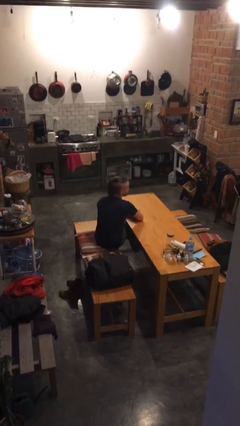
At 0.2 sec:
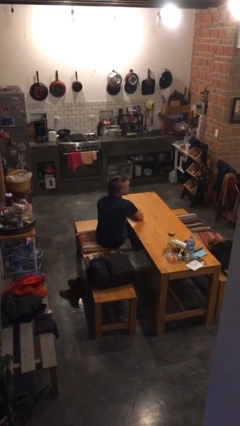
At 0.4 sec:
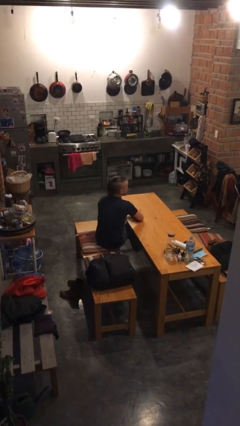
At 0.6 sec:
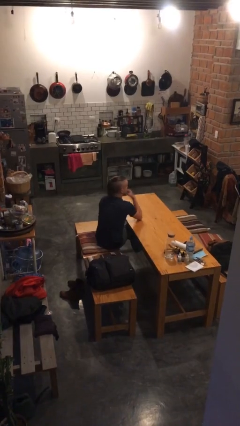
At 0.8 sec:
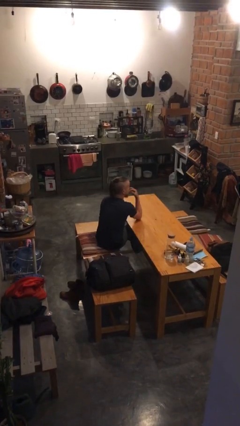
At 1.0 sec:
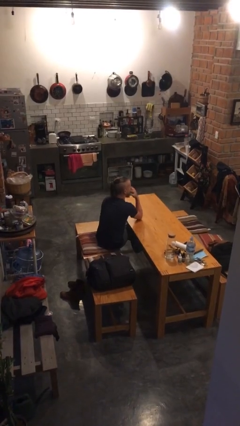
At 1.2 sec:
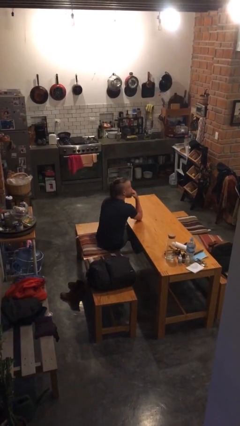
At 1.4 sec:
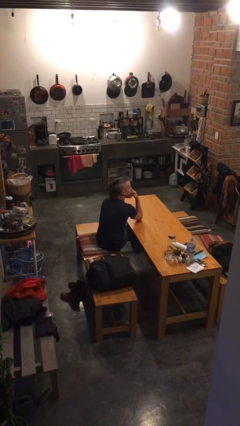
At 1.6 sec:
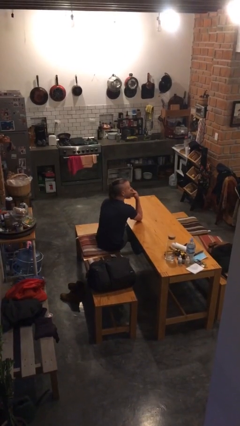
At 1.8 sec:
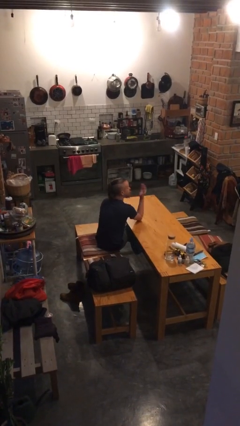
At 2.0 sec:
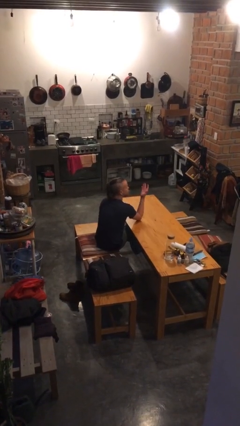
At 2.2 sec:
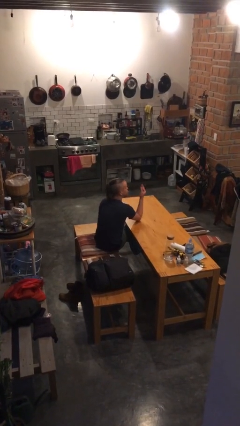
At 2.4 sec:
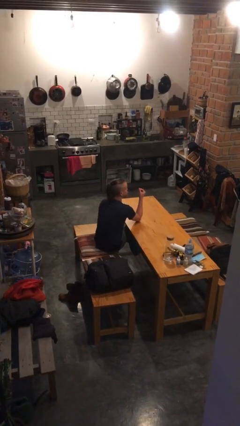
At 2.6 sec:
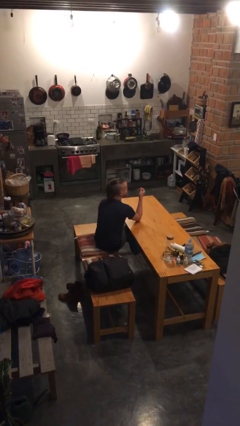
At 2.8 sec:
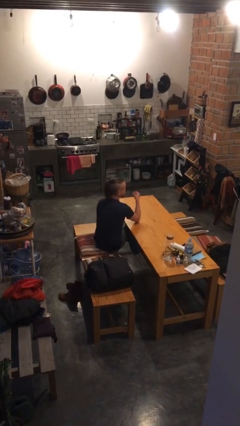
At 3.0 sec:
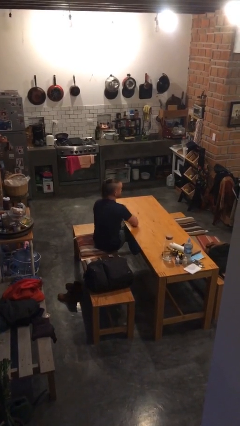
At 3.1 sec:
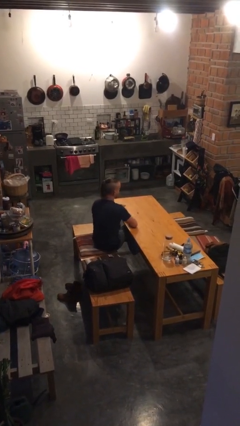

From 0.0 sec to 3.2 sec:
person licks fingers

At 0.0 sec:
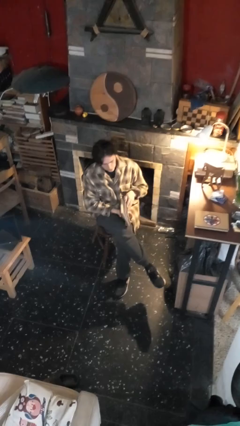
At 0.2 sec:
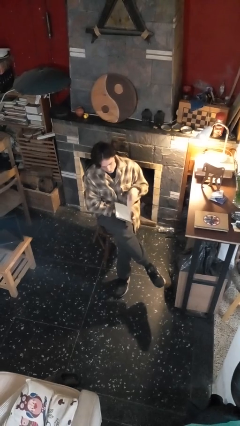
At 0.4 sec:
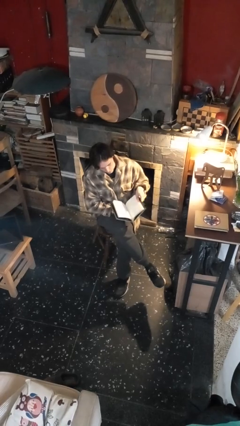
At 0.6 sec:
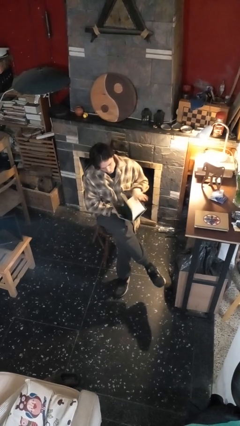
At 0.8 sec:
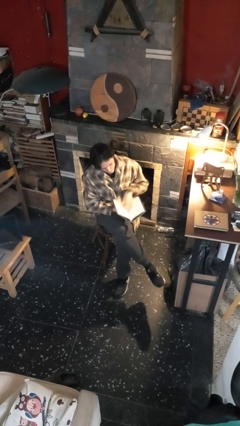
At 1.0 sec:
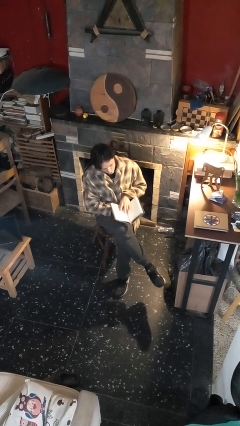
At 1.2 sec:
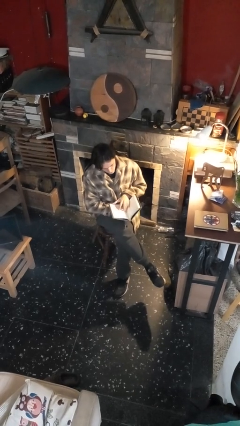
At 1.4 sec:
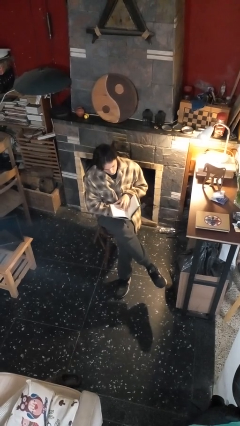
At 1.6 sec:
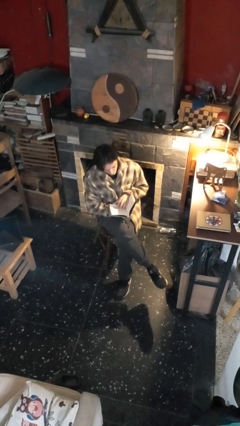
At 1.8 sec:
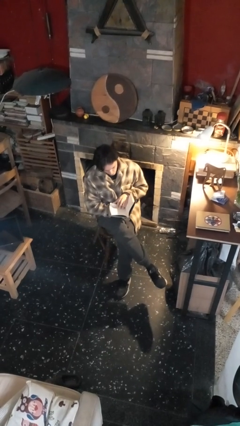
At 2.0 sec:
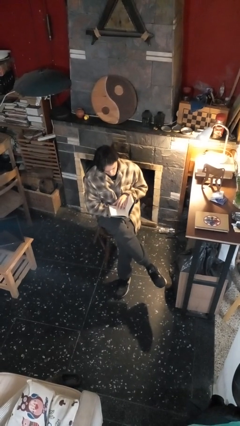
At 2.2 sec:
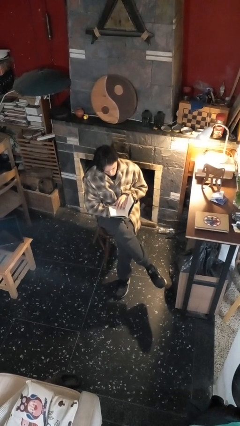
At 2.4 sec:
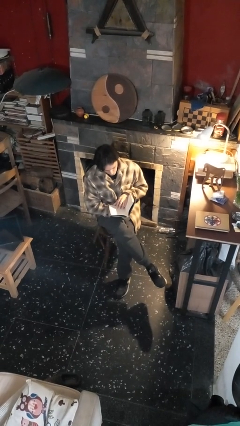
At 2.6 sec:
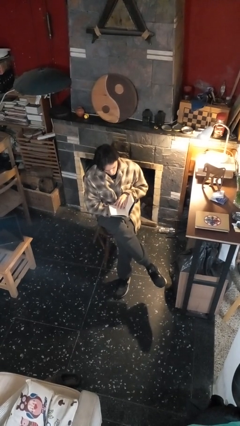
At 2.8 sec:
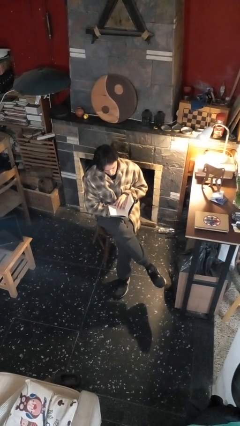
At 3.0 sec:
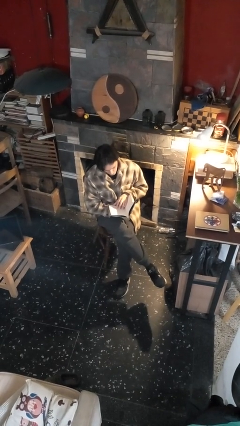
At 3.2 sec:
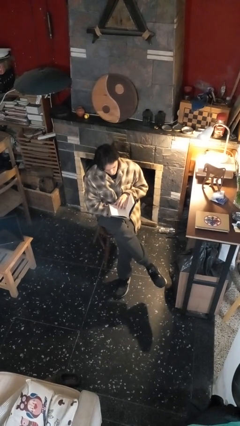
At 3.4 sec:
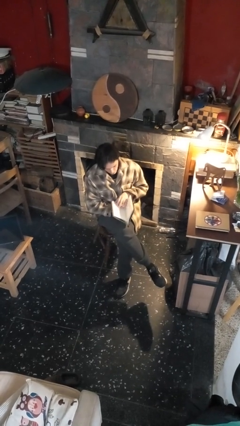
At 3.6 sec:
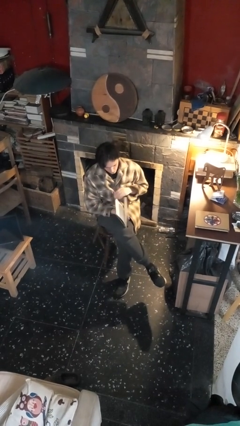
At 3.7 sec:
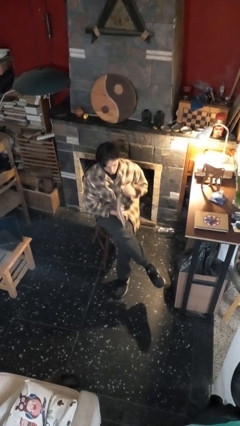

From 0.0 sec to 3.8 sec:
person reads book

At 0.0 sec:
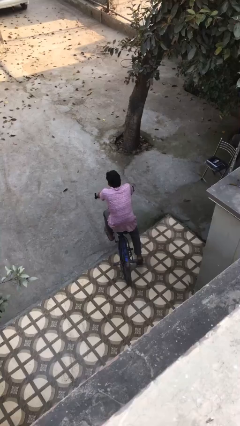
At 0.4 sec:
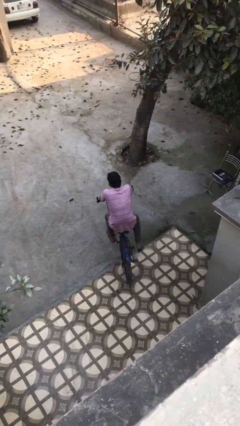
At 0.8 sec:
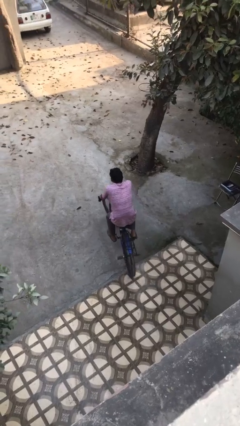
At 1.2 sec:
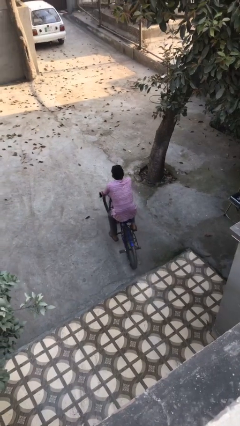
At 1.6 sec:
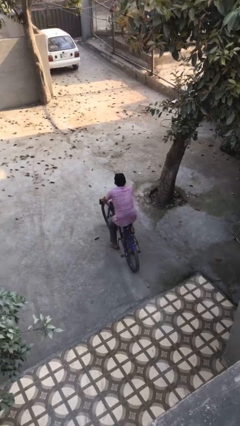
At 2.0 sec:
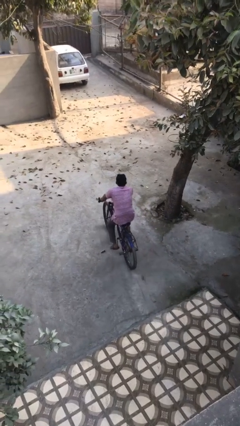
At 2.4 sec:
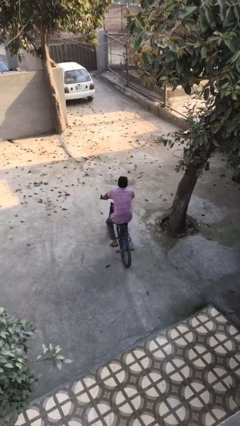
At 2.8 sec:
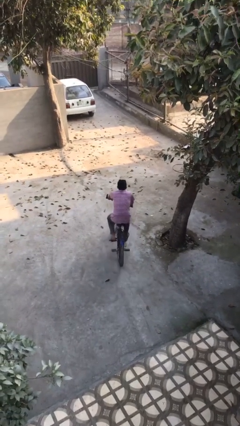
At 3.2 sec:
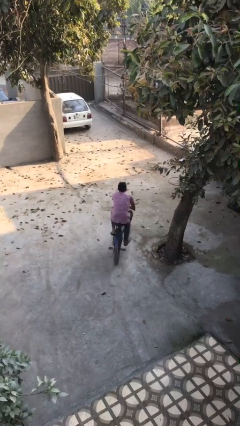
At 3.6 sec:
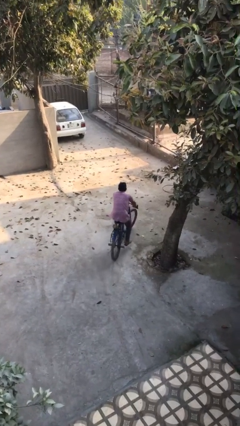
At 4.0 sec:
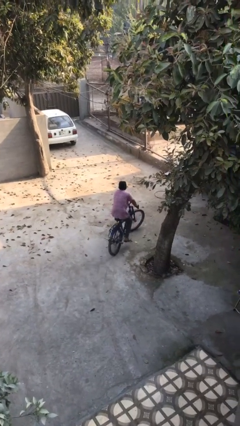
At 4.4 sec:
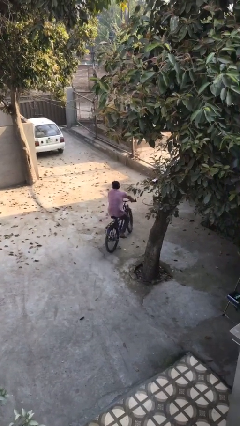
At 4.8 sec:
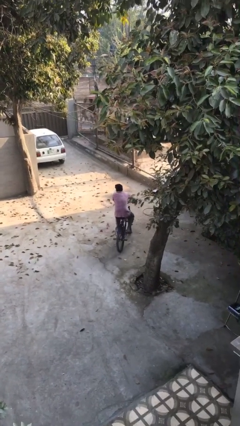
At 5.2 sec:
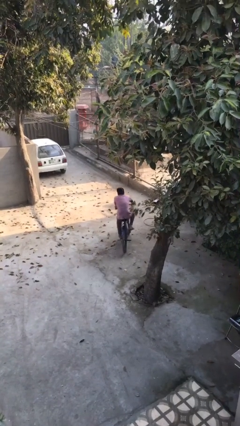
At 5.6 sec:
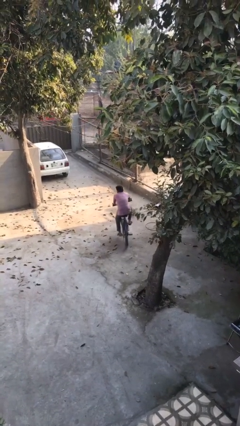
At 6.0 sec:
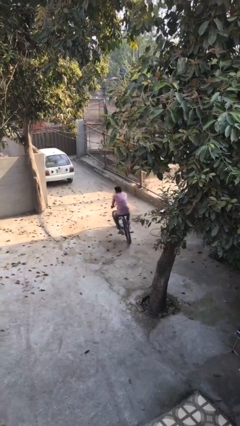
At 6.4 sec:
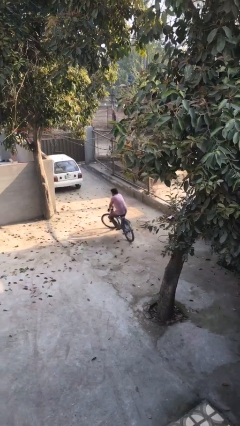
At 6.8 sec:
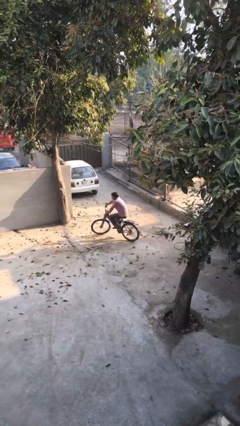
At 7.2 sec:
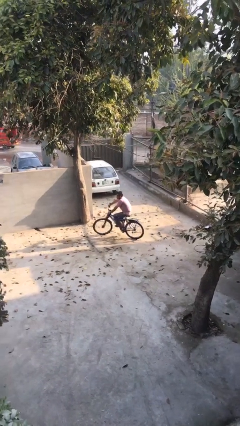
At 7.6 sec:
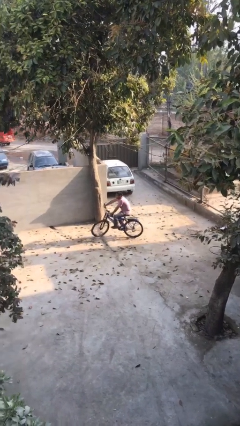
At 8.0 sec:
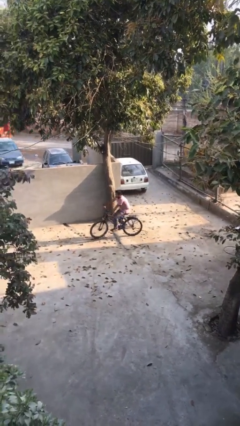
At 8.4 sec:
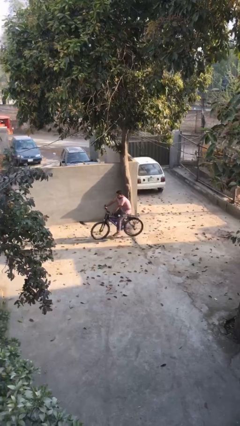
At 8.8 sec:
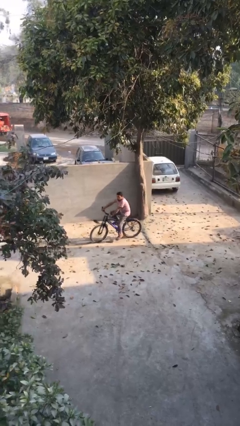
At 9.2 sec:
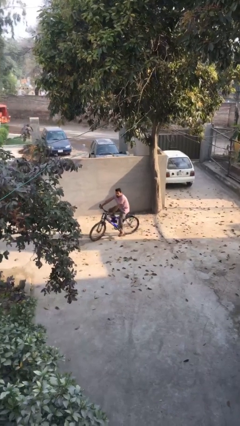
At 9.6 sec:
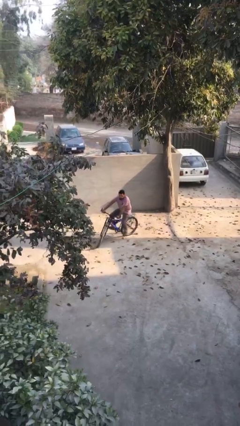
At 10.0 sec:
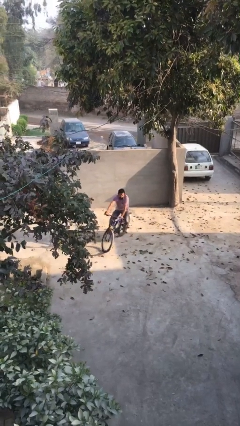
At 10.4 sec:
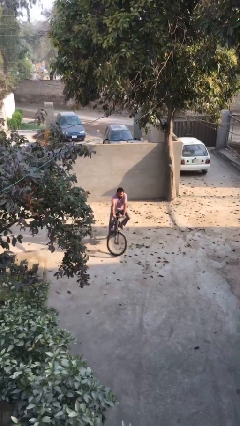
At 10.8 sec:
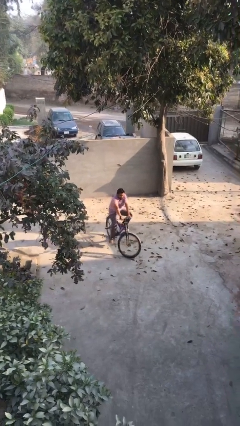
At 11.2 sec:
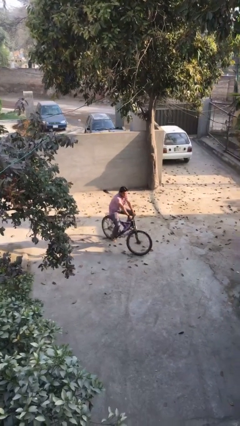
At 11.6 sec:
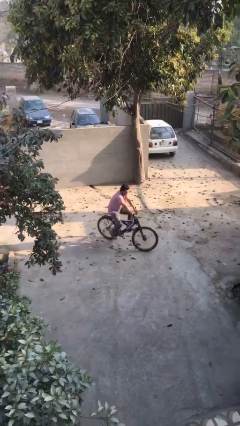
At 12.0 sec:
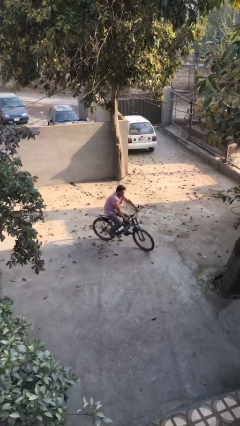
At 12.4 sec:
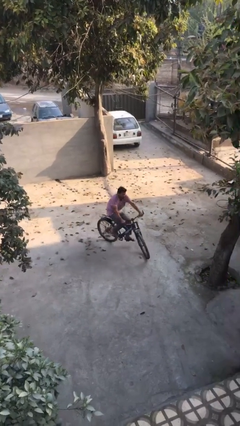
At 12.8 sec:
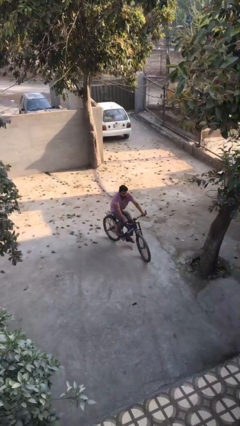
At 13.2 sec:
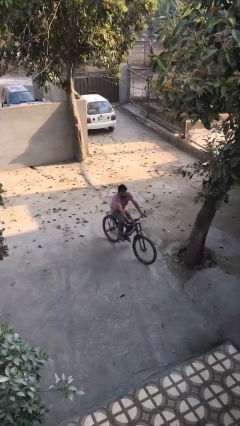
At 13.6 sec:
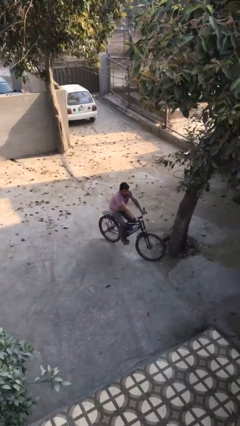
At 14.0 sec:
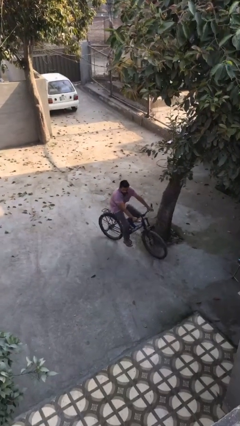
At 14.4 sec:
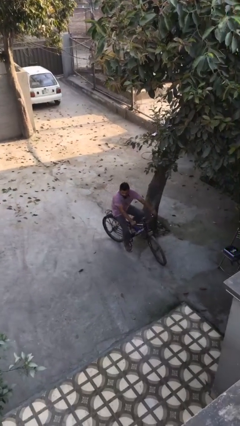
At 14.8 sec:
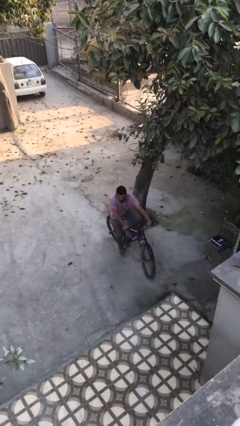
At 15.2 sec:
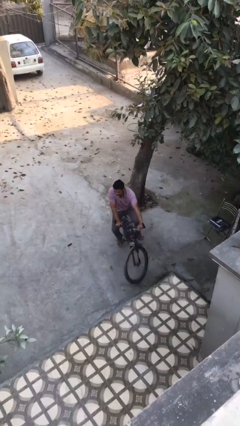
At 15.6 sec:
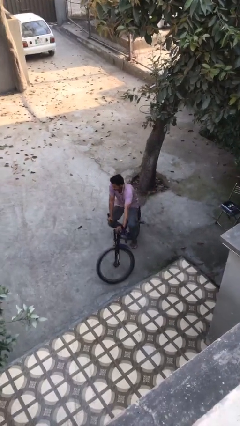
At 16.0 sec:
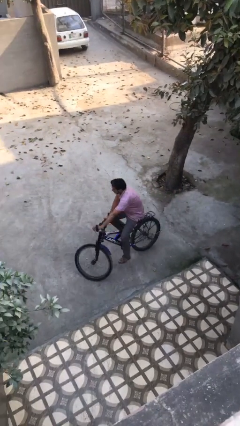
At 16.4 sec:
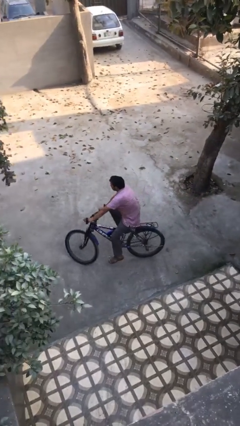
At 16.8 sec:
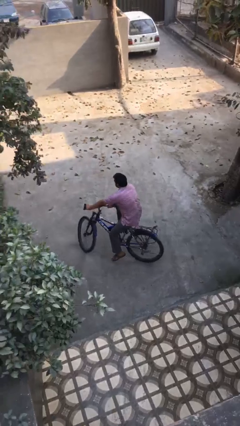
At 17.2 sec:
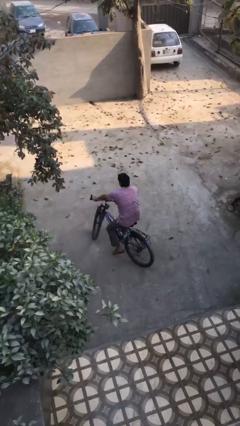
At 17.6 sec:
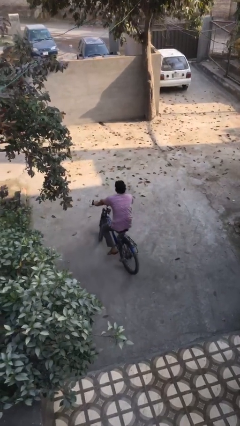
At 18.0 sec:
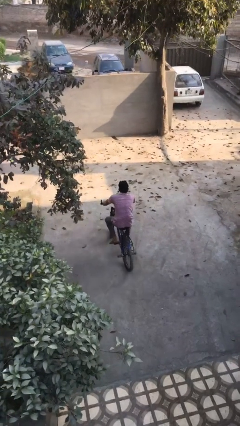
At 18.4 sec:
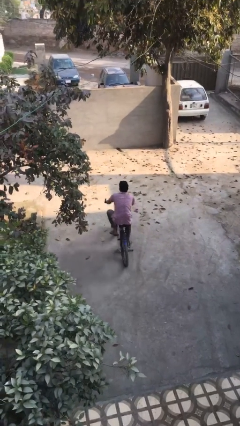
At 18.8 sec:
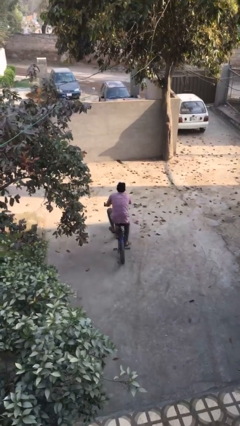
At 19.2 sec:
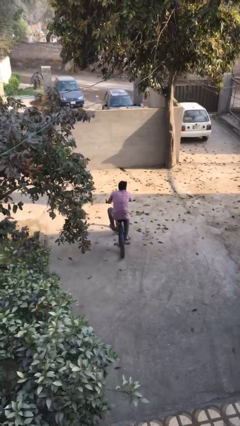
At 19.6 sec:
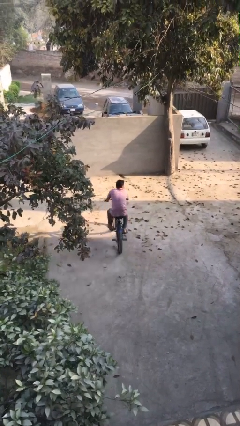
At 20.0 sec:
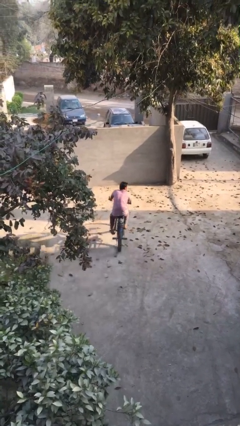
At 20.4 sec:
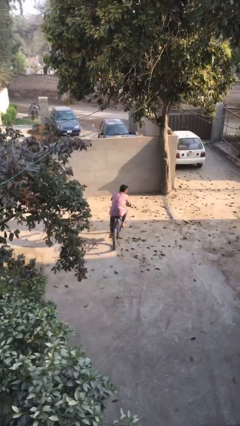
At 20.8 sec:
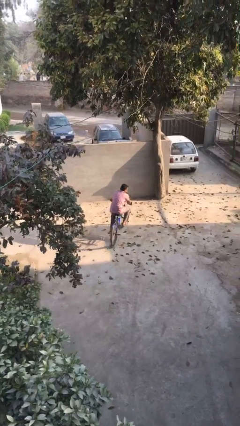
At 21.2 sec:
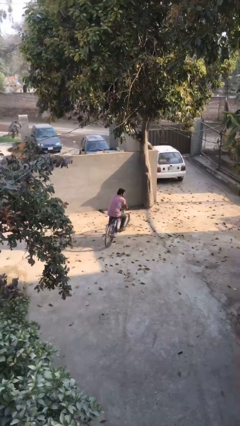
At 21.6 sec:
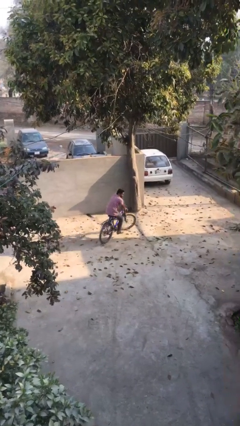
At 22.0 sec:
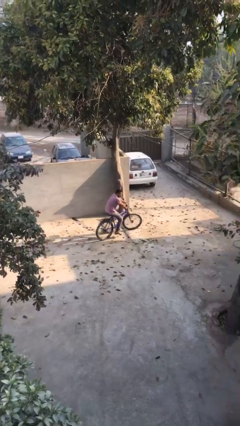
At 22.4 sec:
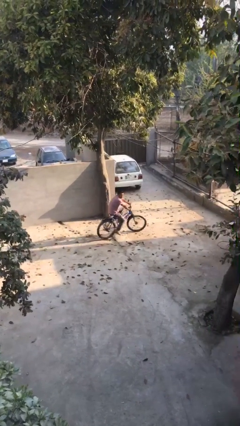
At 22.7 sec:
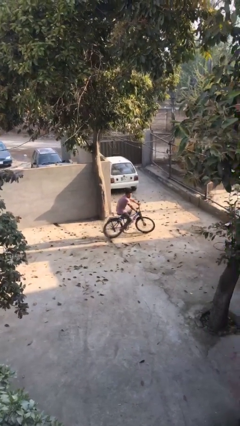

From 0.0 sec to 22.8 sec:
person rides bicycle
